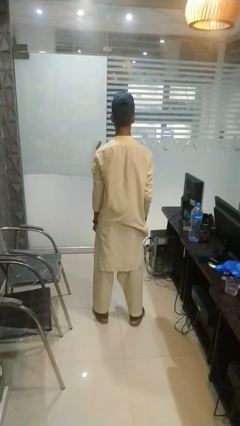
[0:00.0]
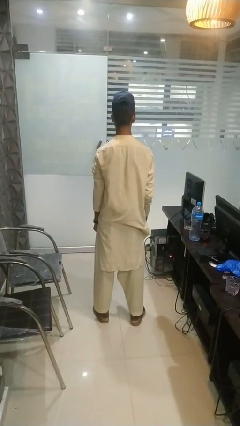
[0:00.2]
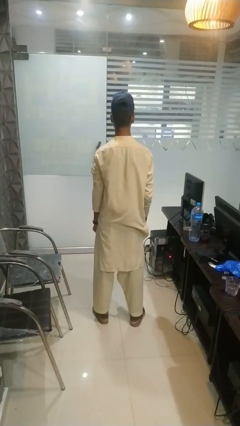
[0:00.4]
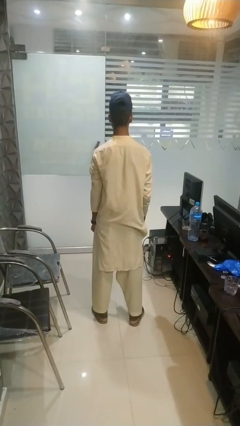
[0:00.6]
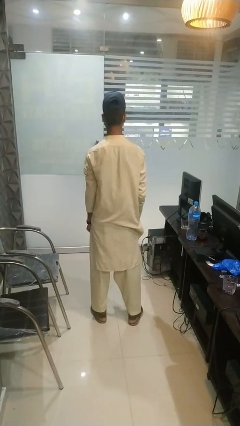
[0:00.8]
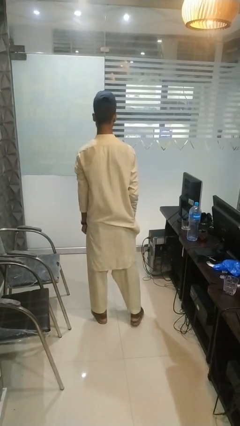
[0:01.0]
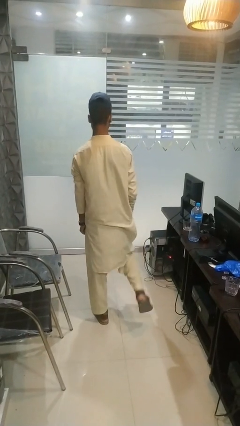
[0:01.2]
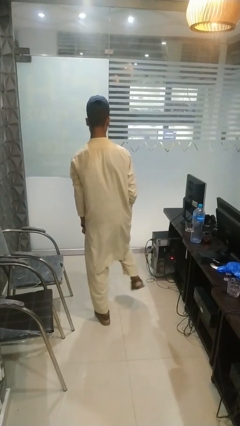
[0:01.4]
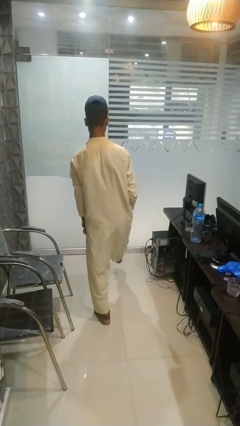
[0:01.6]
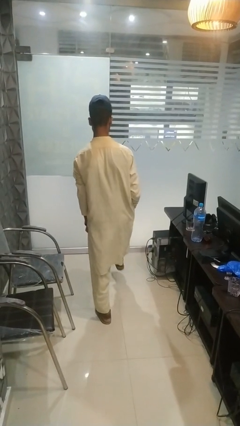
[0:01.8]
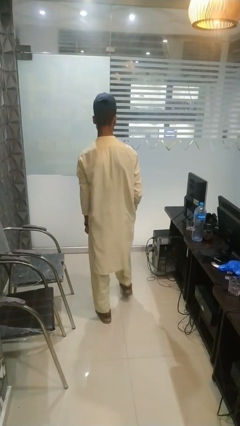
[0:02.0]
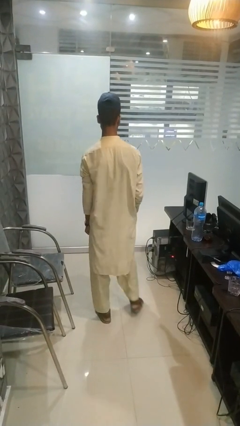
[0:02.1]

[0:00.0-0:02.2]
person karate kicks

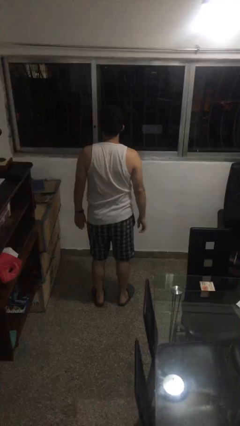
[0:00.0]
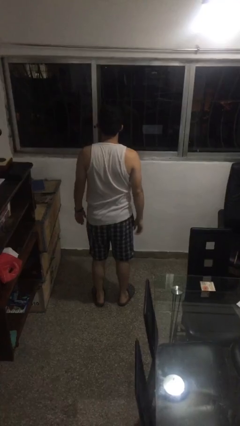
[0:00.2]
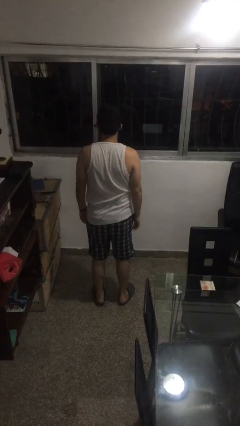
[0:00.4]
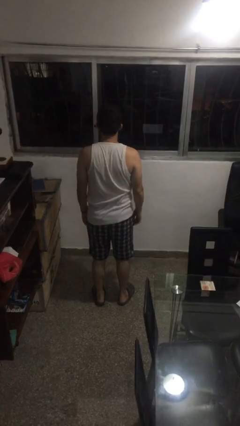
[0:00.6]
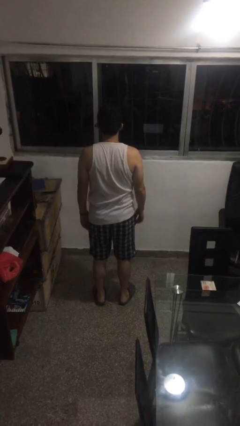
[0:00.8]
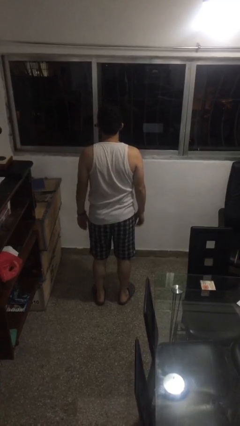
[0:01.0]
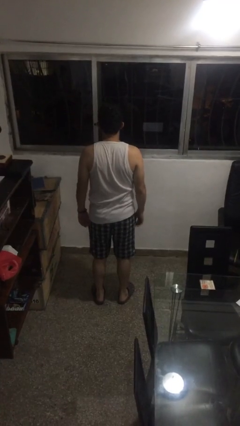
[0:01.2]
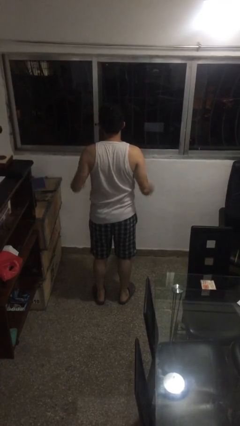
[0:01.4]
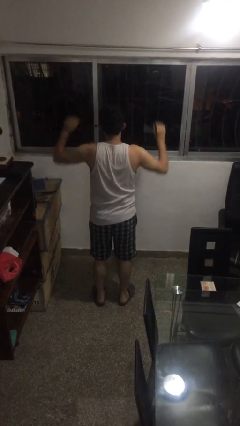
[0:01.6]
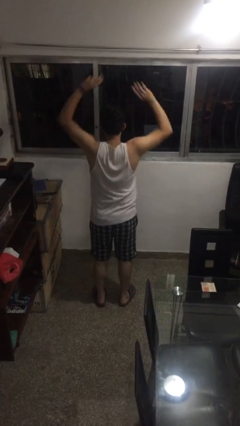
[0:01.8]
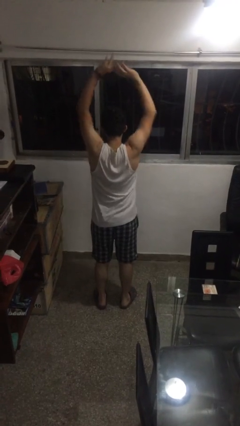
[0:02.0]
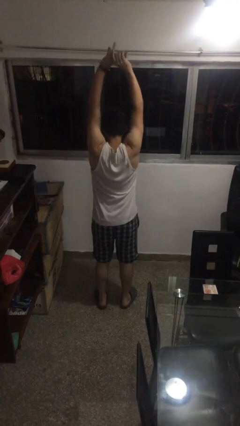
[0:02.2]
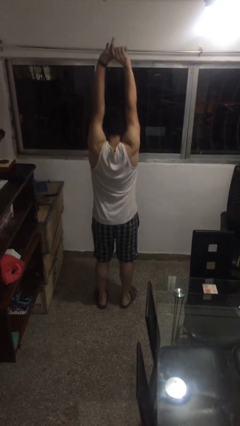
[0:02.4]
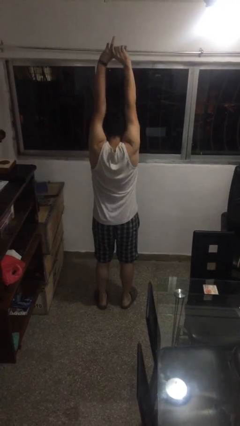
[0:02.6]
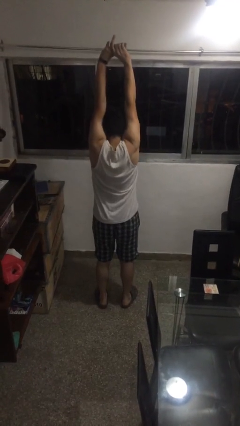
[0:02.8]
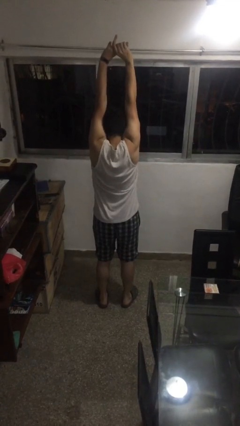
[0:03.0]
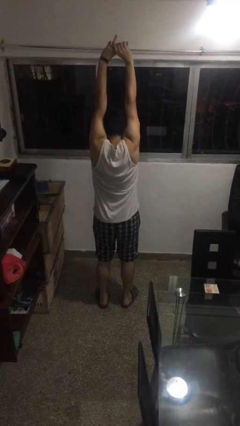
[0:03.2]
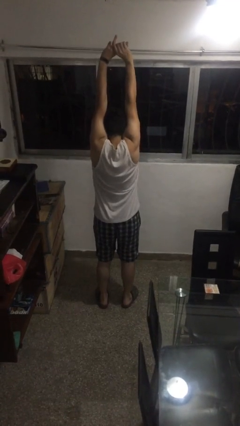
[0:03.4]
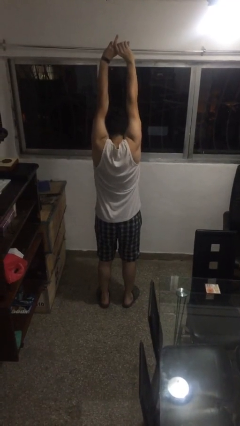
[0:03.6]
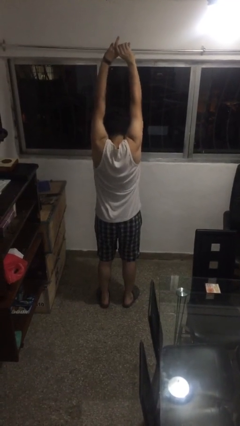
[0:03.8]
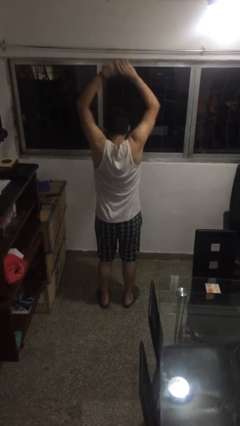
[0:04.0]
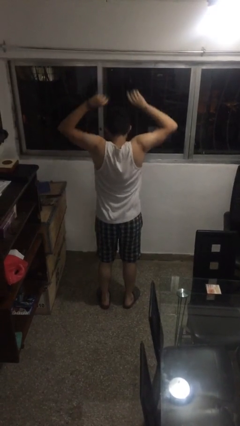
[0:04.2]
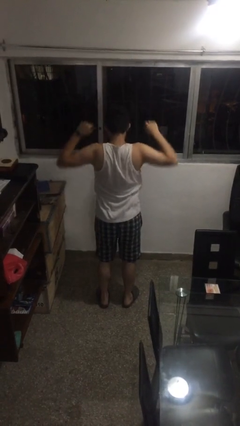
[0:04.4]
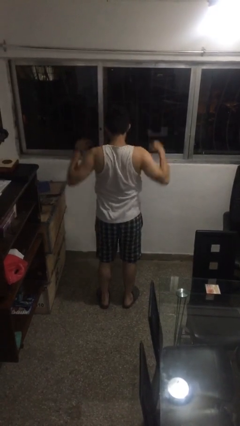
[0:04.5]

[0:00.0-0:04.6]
person stretches arms over head

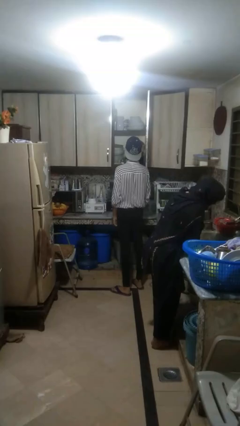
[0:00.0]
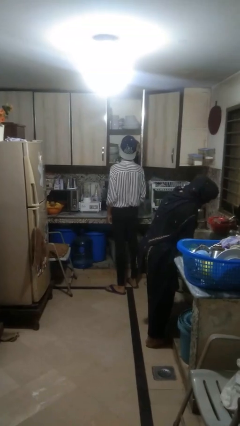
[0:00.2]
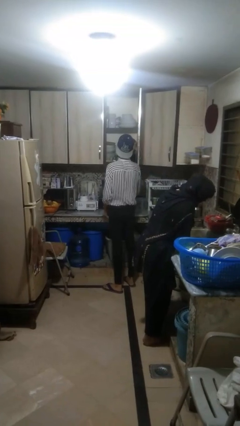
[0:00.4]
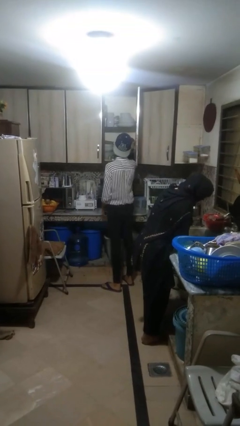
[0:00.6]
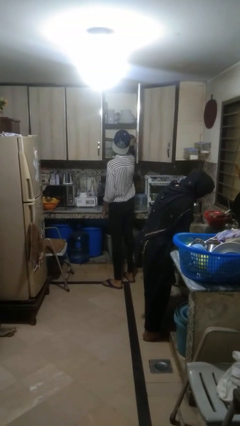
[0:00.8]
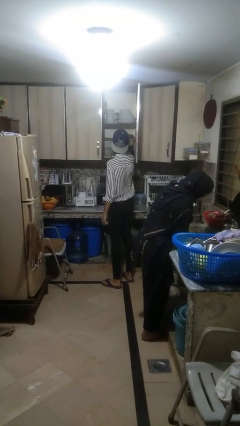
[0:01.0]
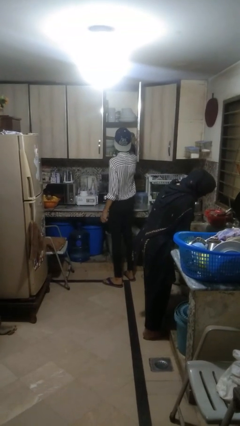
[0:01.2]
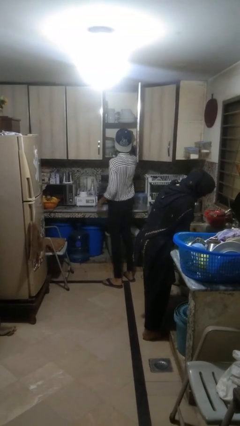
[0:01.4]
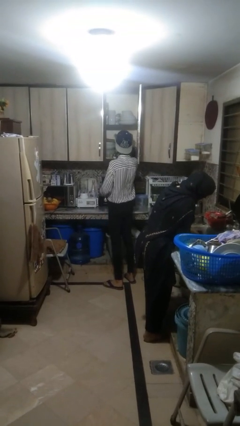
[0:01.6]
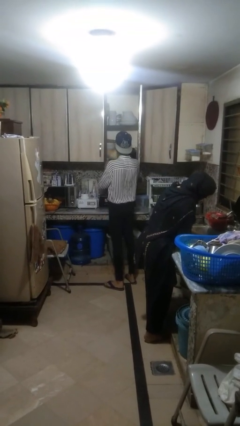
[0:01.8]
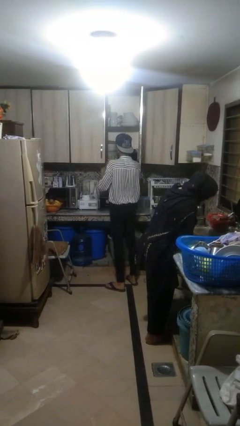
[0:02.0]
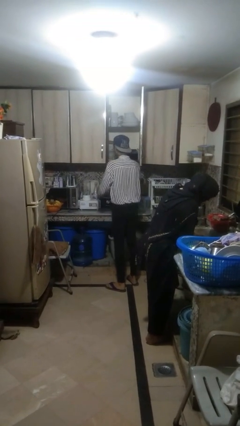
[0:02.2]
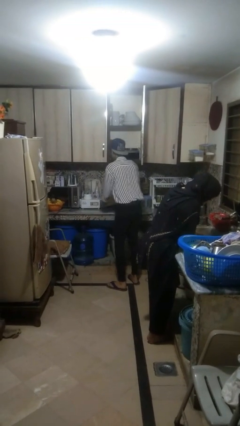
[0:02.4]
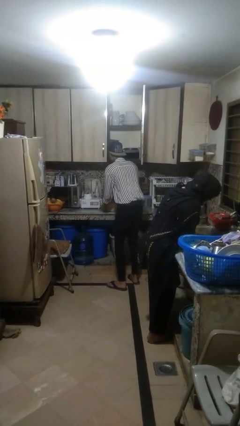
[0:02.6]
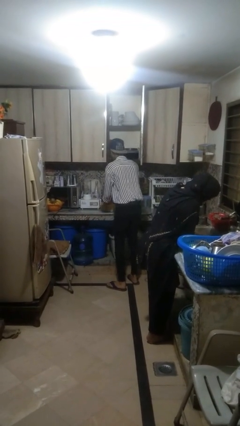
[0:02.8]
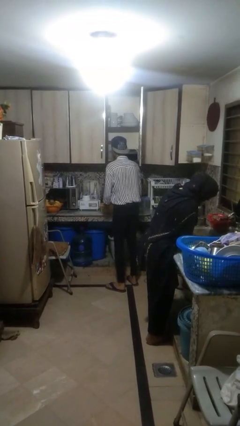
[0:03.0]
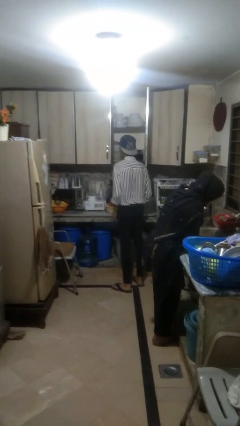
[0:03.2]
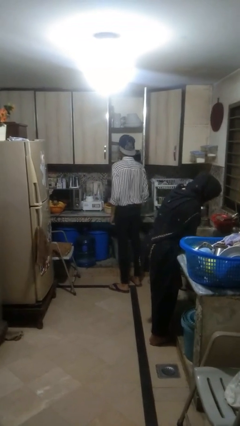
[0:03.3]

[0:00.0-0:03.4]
person takes object from cabinet

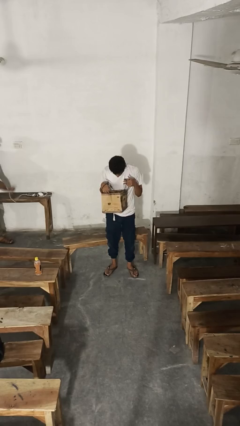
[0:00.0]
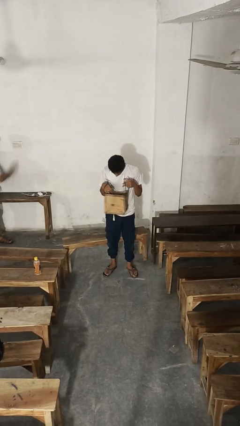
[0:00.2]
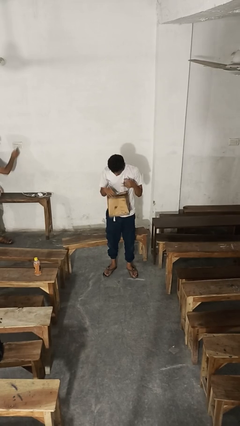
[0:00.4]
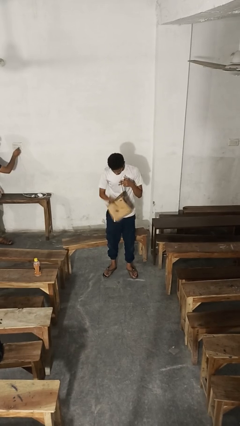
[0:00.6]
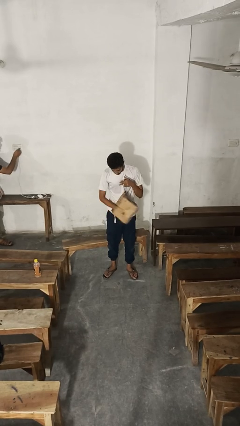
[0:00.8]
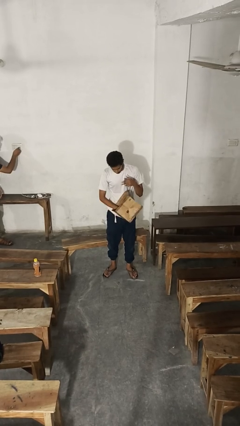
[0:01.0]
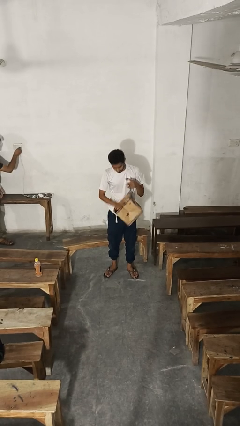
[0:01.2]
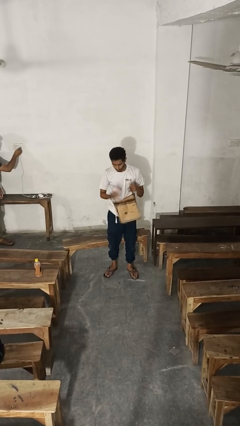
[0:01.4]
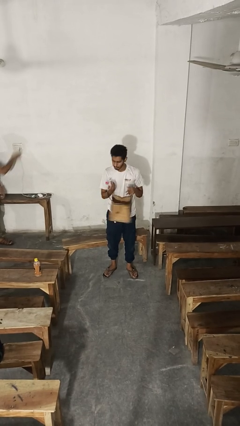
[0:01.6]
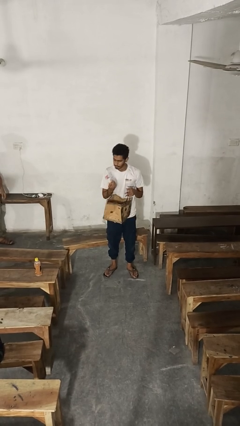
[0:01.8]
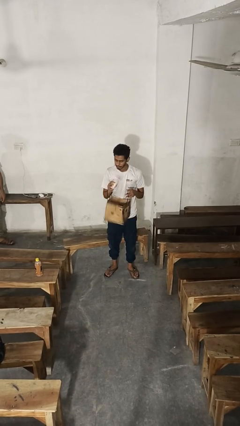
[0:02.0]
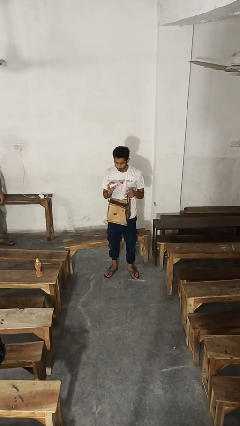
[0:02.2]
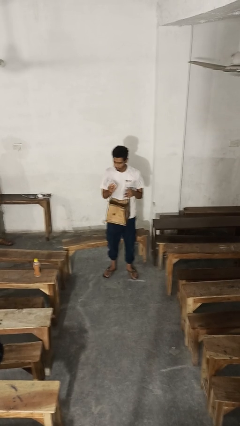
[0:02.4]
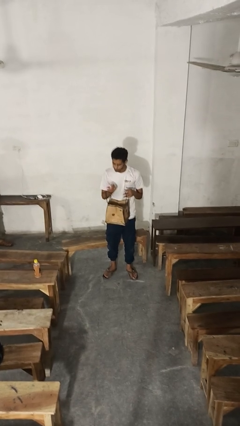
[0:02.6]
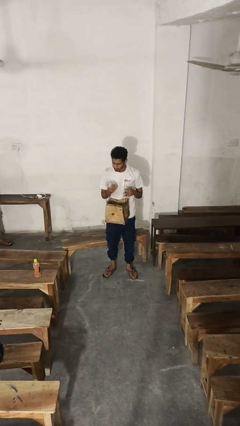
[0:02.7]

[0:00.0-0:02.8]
person takes object from purse

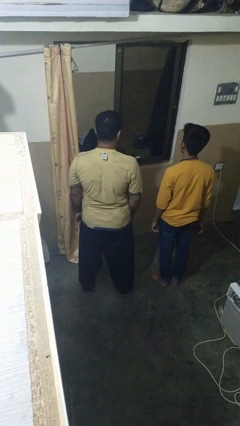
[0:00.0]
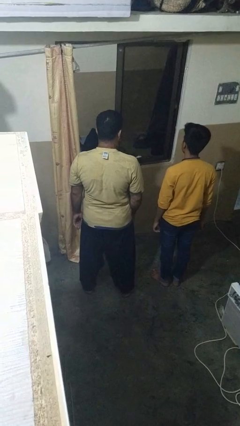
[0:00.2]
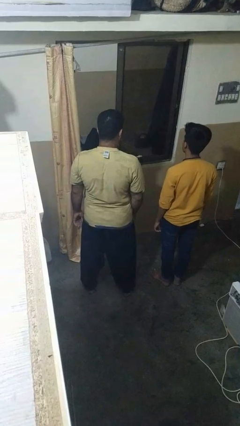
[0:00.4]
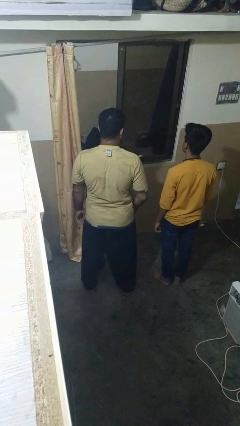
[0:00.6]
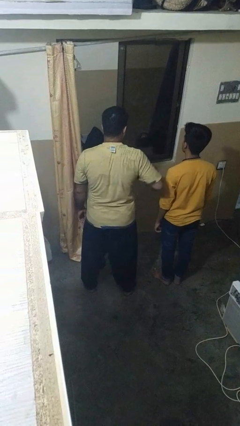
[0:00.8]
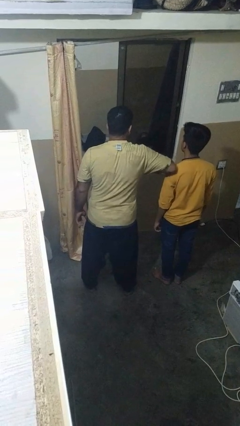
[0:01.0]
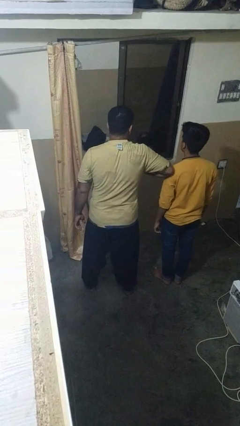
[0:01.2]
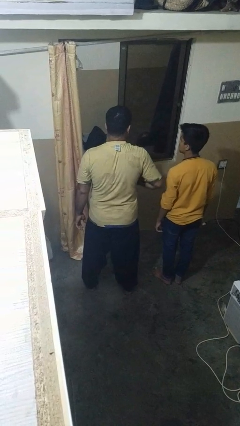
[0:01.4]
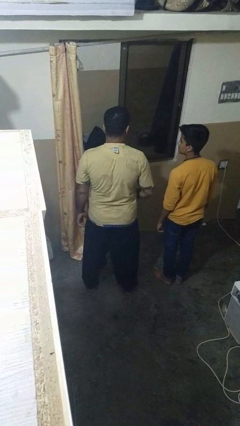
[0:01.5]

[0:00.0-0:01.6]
person nudges person with elbow

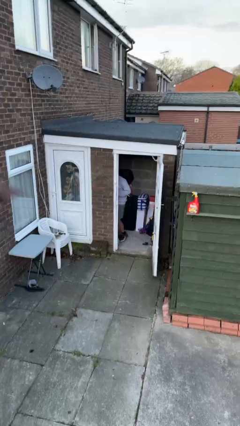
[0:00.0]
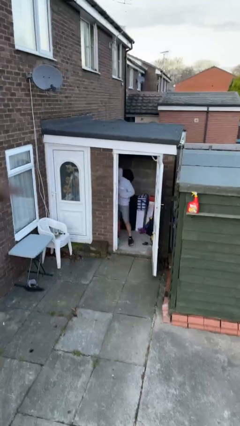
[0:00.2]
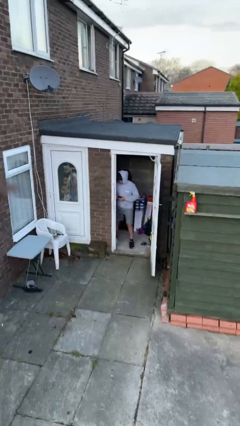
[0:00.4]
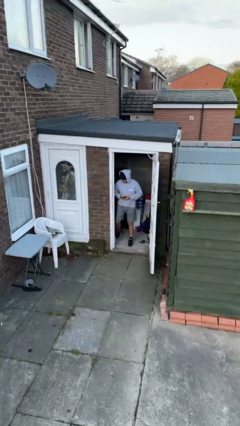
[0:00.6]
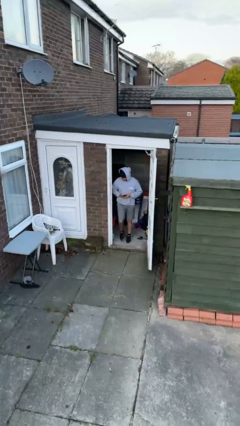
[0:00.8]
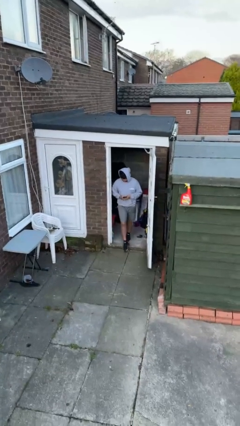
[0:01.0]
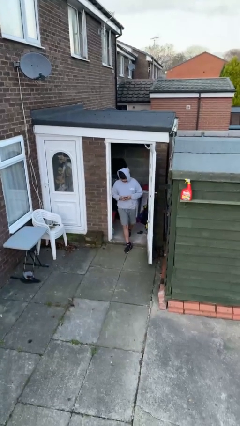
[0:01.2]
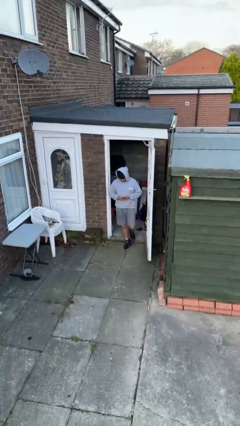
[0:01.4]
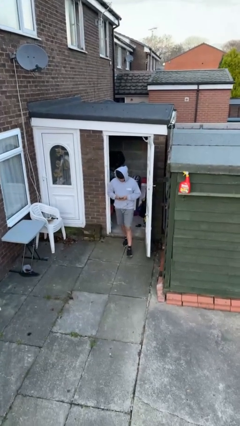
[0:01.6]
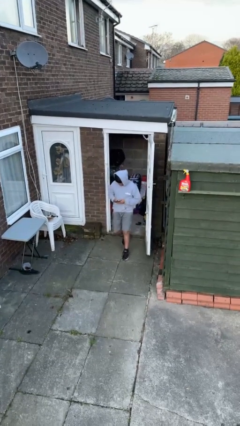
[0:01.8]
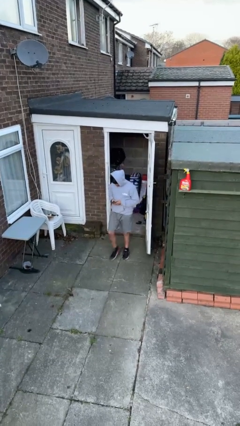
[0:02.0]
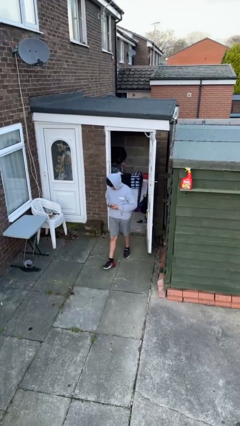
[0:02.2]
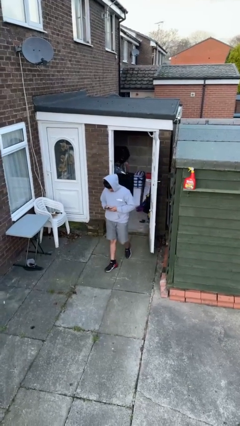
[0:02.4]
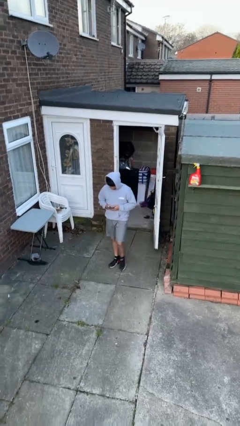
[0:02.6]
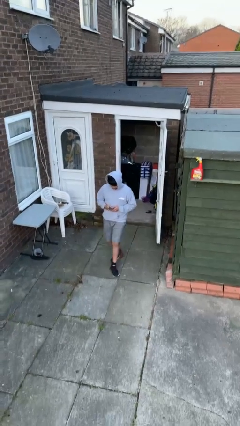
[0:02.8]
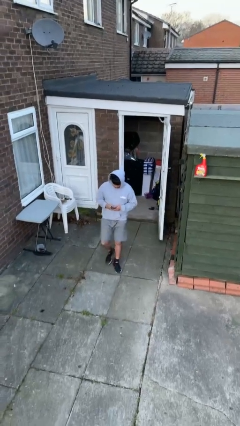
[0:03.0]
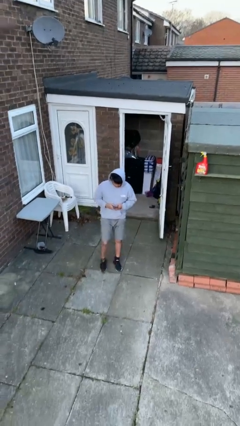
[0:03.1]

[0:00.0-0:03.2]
person enters scene through structure
